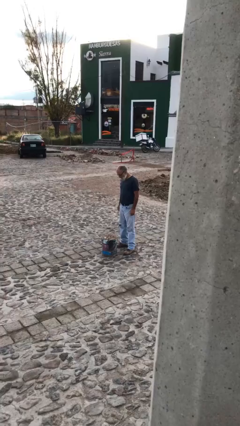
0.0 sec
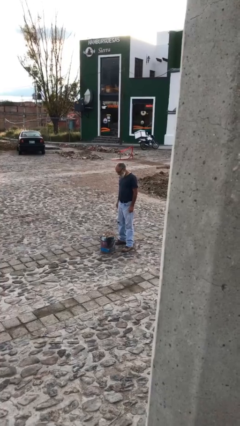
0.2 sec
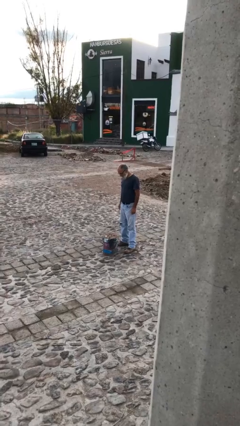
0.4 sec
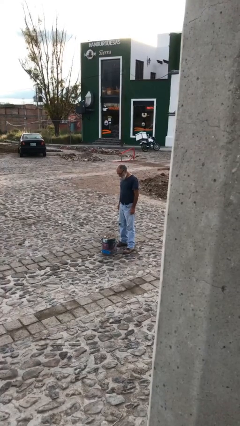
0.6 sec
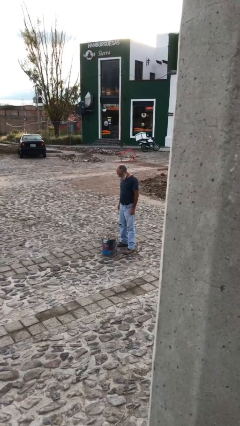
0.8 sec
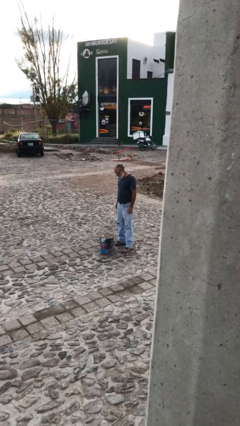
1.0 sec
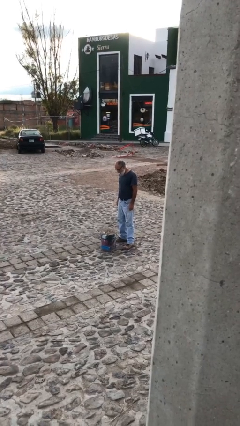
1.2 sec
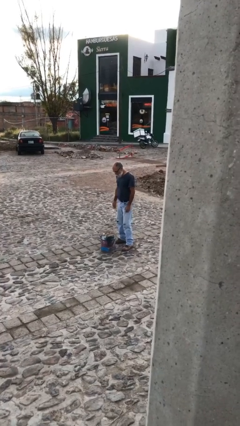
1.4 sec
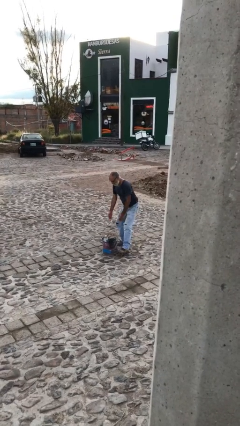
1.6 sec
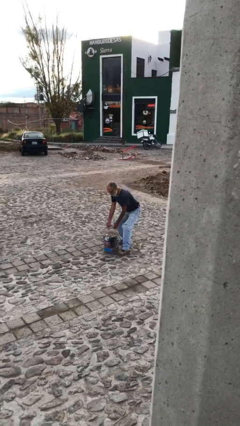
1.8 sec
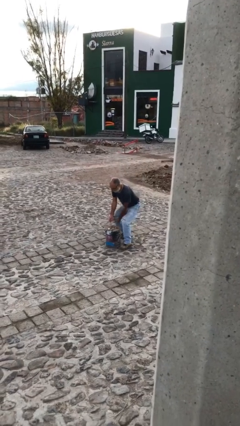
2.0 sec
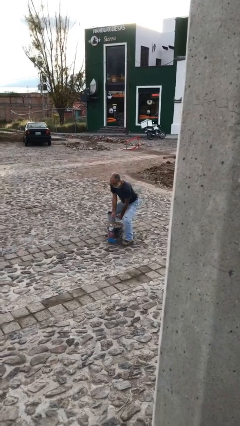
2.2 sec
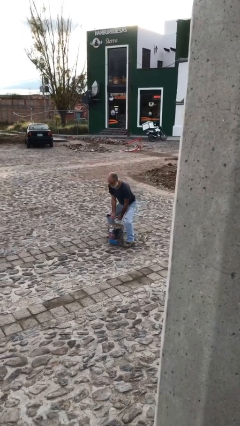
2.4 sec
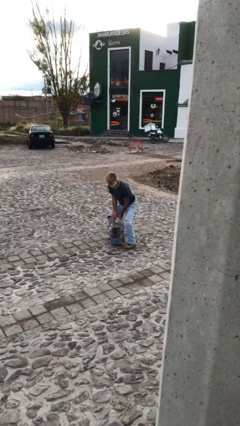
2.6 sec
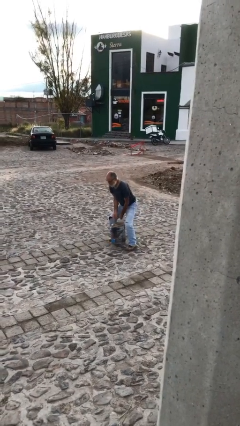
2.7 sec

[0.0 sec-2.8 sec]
person picks up object from floor

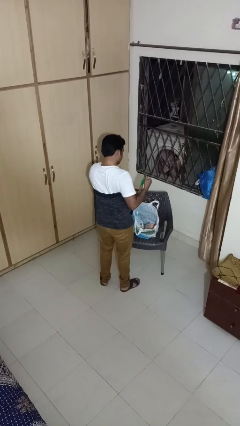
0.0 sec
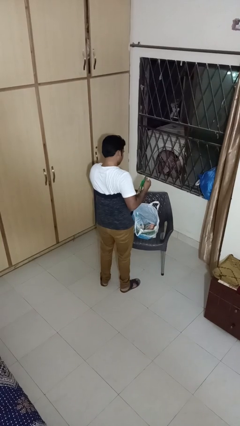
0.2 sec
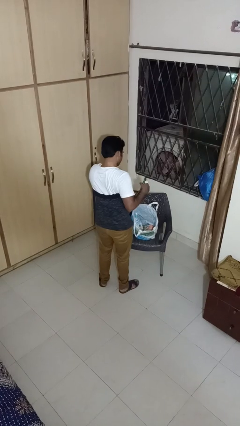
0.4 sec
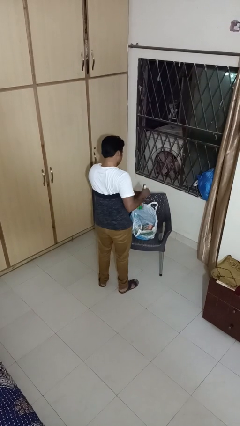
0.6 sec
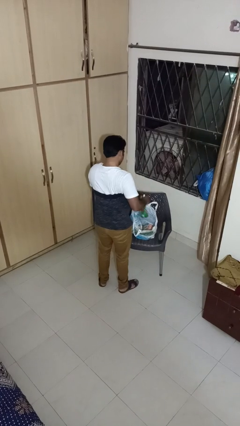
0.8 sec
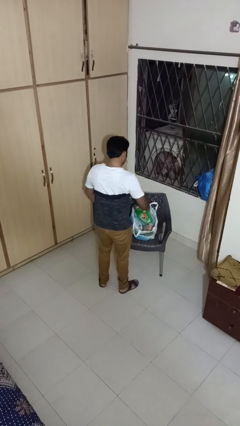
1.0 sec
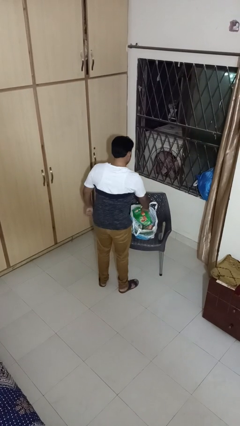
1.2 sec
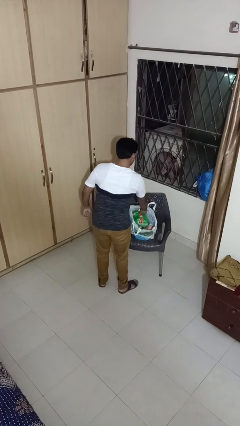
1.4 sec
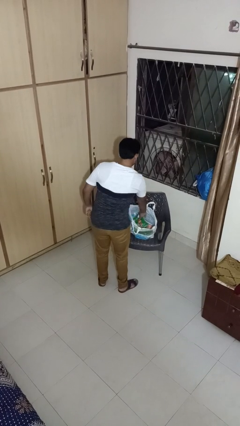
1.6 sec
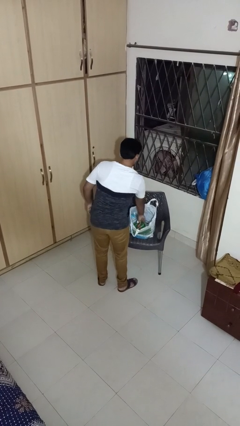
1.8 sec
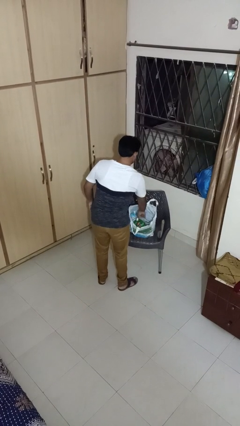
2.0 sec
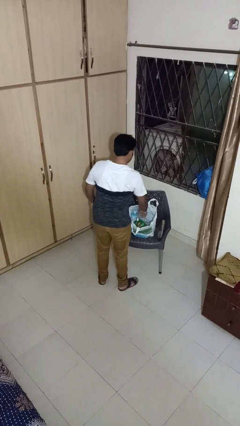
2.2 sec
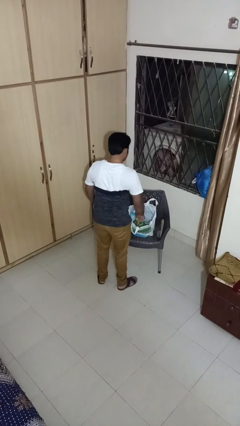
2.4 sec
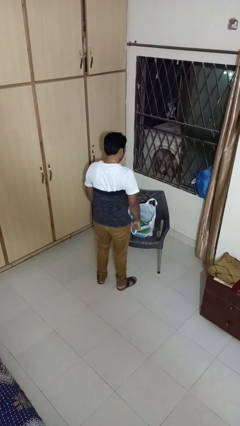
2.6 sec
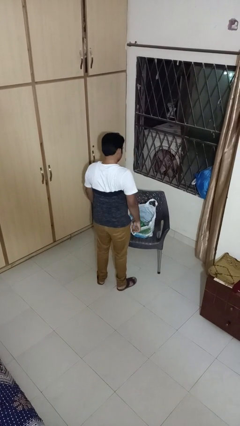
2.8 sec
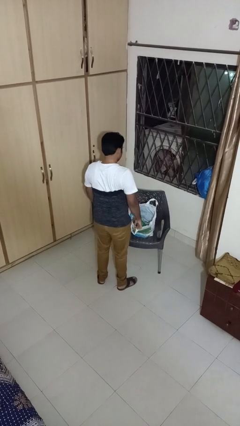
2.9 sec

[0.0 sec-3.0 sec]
person puts object into bag

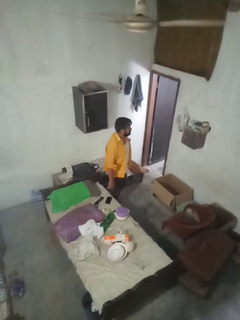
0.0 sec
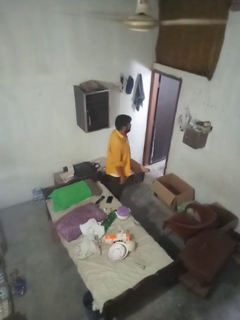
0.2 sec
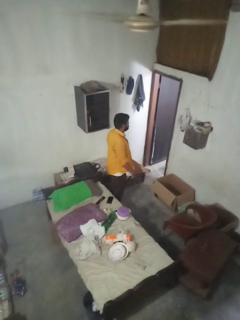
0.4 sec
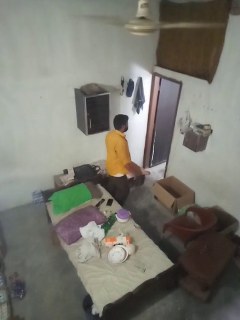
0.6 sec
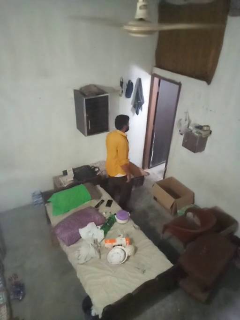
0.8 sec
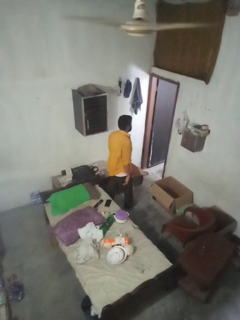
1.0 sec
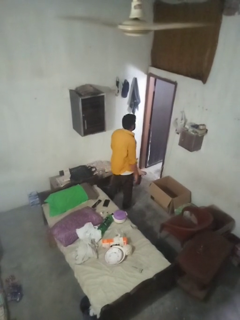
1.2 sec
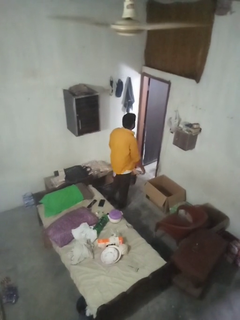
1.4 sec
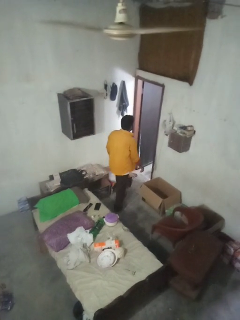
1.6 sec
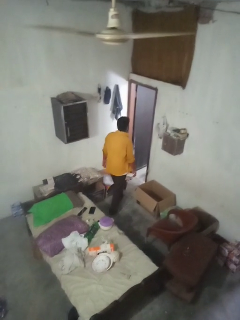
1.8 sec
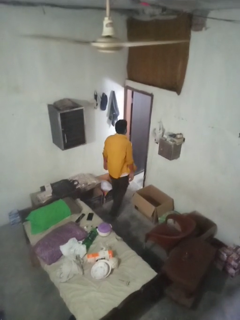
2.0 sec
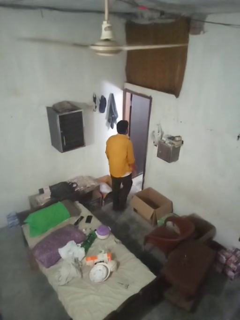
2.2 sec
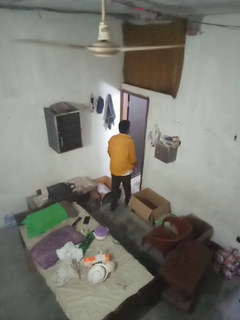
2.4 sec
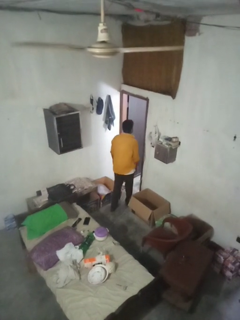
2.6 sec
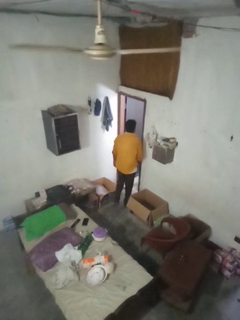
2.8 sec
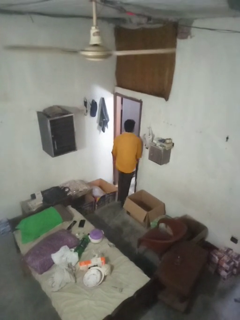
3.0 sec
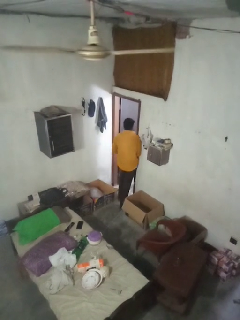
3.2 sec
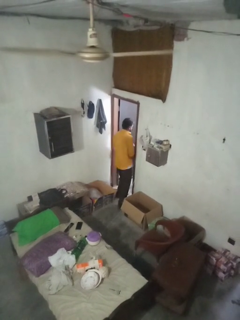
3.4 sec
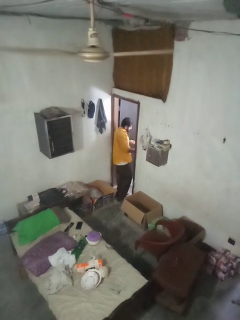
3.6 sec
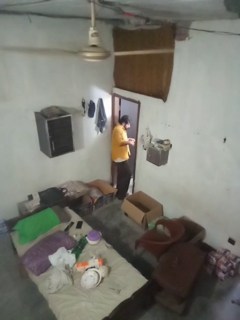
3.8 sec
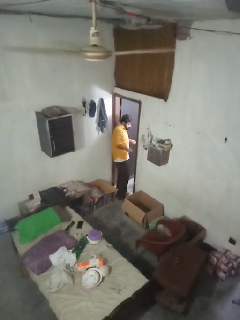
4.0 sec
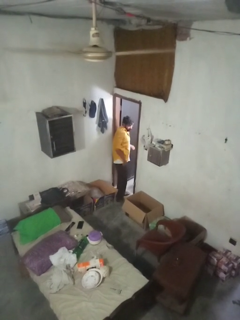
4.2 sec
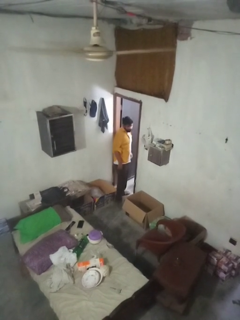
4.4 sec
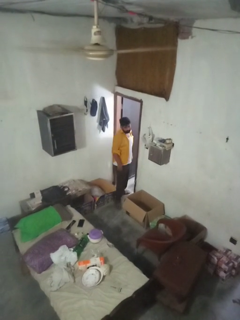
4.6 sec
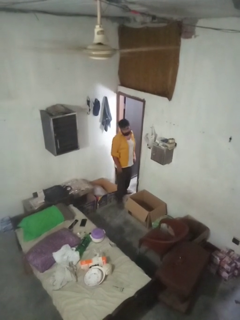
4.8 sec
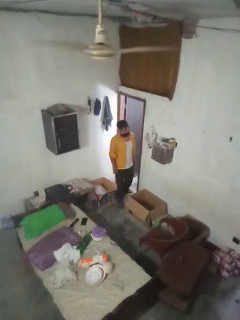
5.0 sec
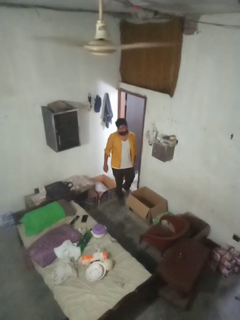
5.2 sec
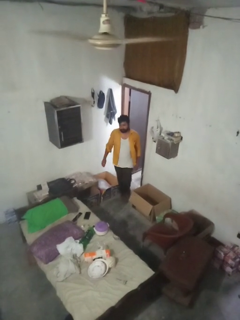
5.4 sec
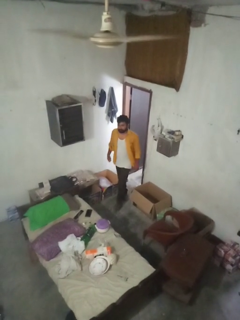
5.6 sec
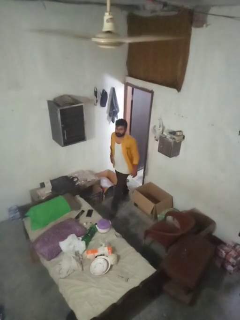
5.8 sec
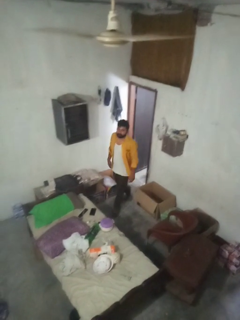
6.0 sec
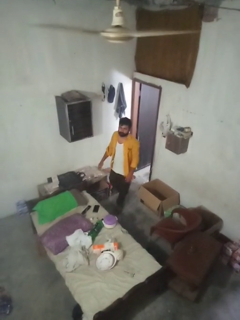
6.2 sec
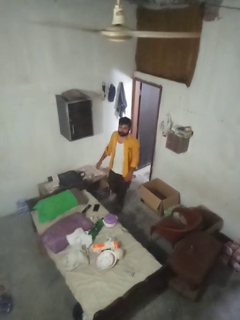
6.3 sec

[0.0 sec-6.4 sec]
person bumps into wall

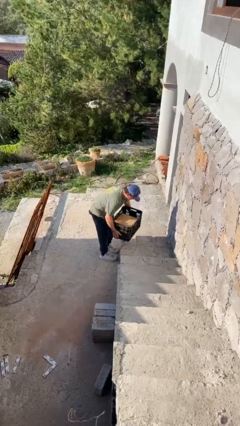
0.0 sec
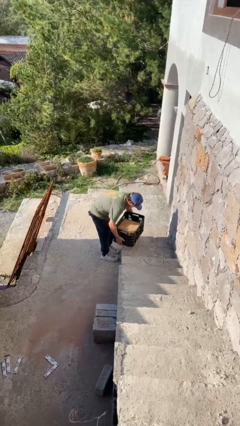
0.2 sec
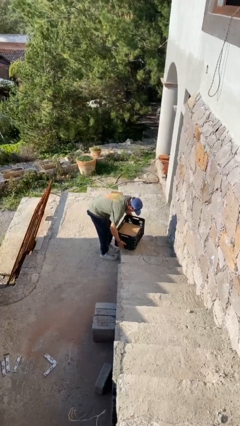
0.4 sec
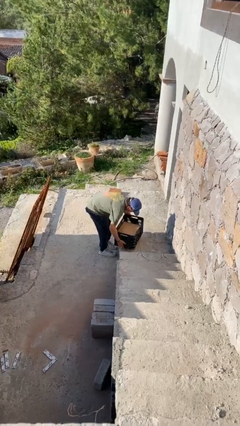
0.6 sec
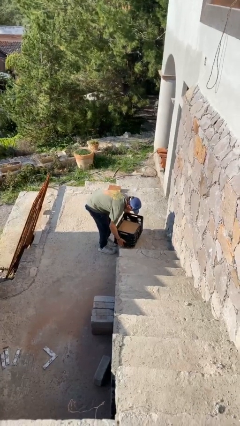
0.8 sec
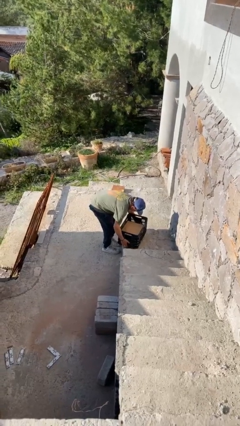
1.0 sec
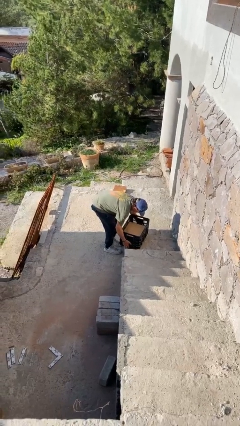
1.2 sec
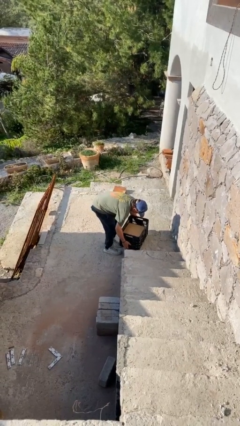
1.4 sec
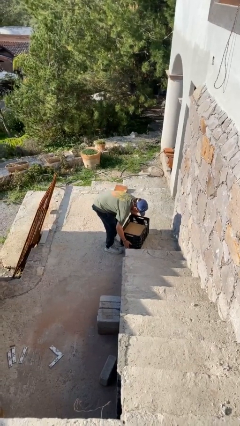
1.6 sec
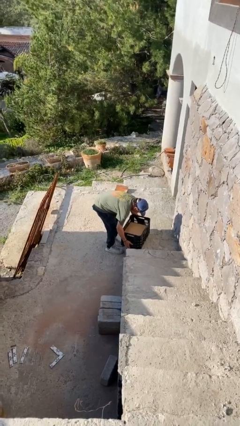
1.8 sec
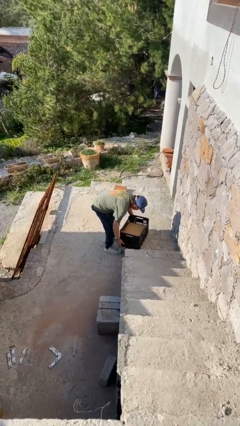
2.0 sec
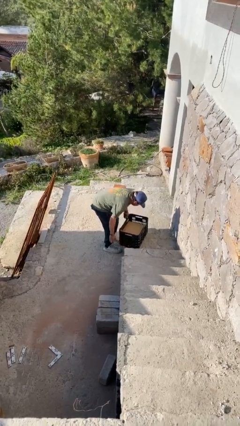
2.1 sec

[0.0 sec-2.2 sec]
person puts down object on floor

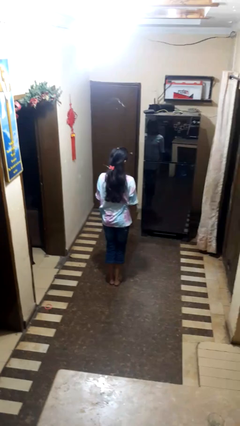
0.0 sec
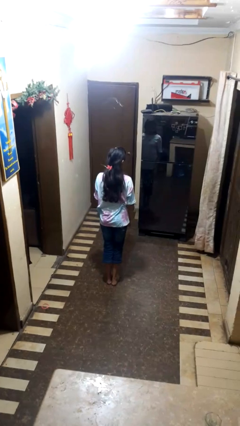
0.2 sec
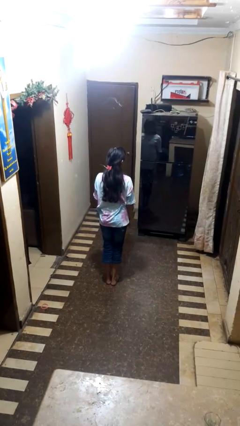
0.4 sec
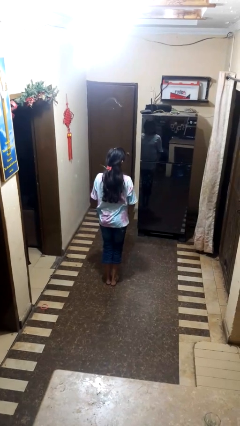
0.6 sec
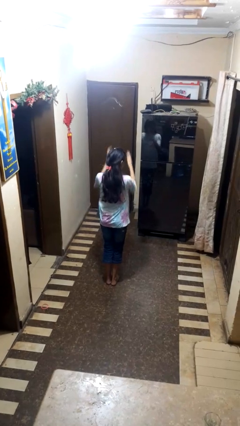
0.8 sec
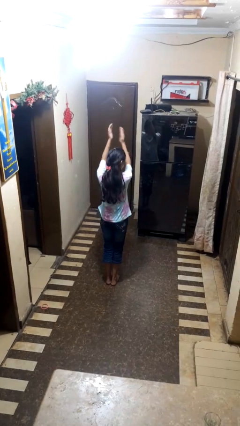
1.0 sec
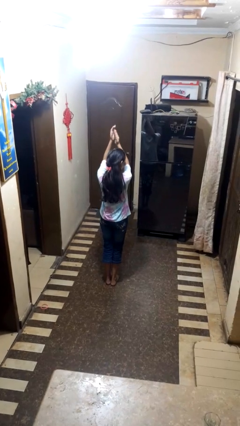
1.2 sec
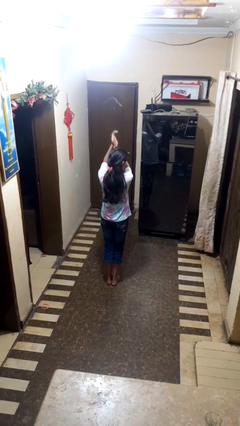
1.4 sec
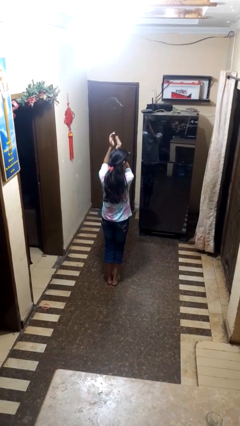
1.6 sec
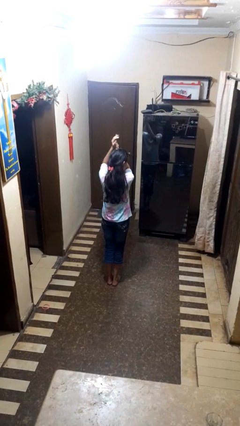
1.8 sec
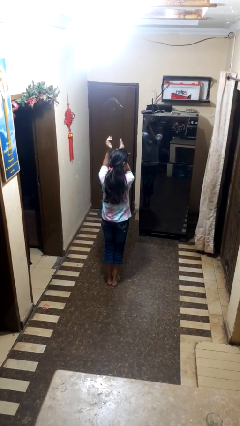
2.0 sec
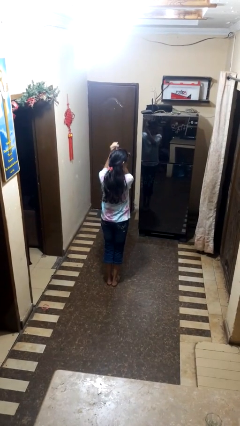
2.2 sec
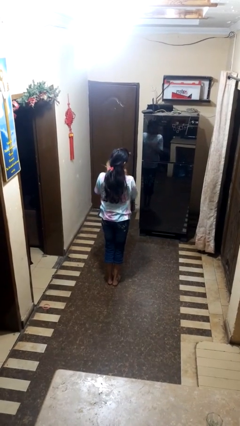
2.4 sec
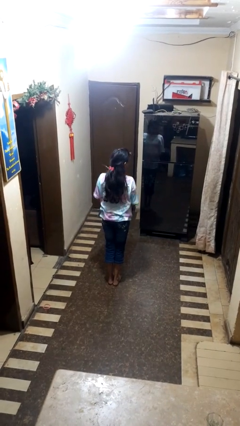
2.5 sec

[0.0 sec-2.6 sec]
person claps hands

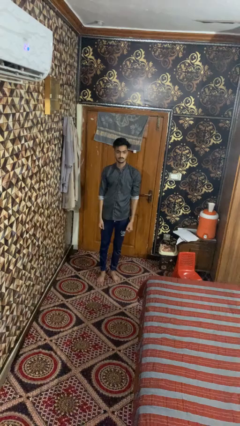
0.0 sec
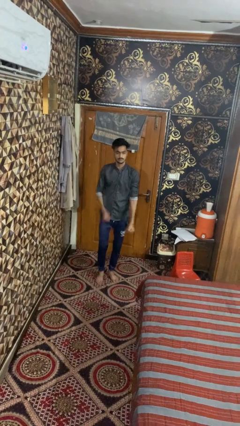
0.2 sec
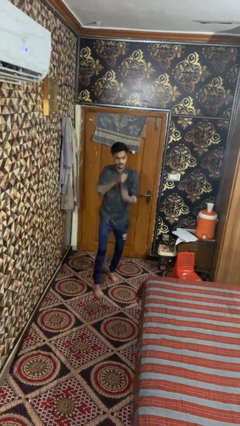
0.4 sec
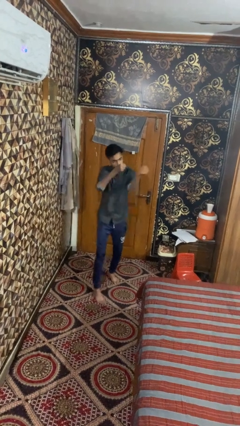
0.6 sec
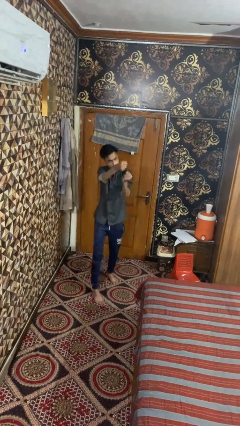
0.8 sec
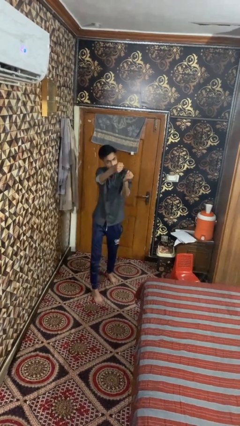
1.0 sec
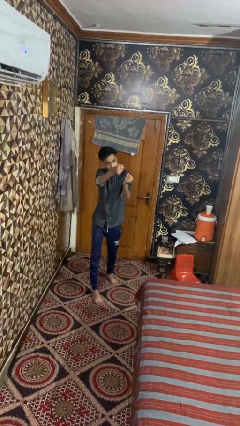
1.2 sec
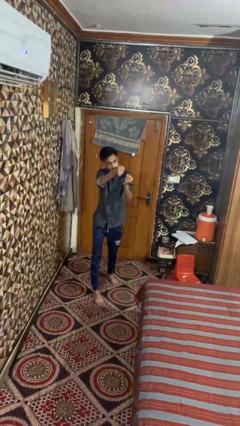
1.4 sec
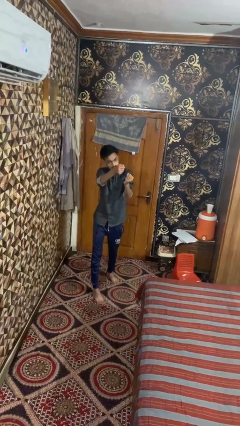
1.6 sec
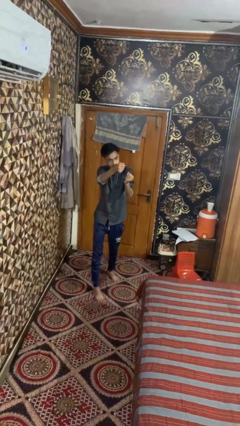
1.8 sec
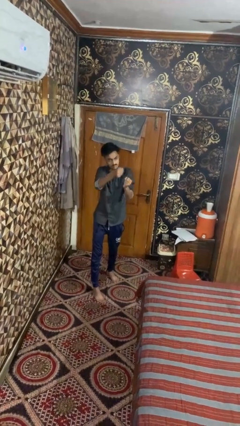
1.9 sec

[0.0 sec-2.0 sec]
person punches
